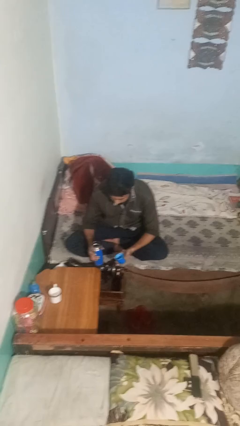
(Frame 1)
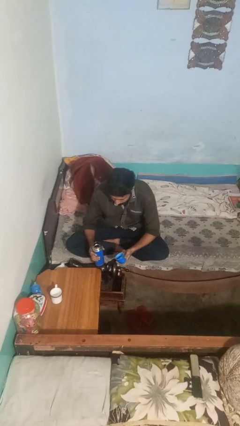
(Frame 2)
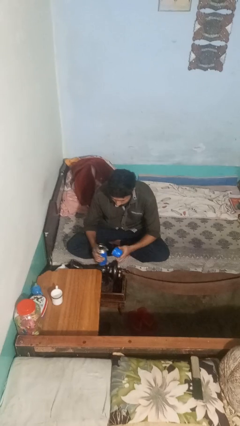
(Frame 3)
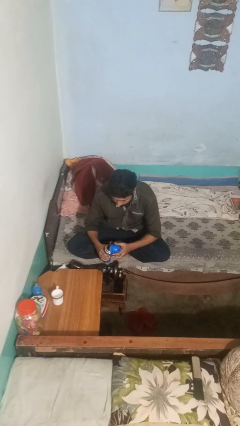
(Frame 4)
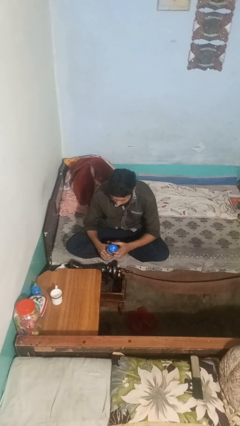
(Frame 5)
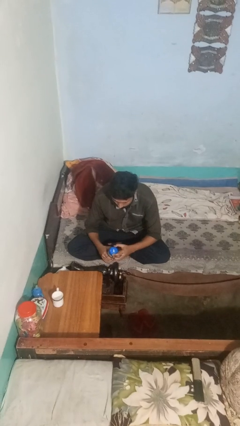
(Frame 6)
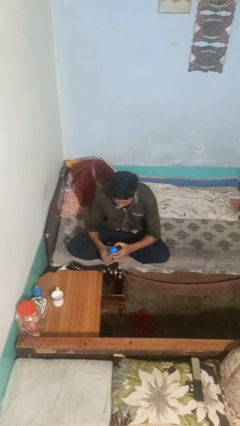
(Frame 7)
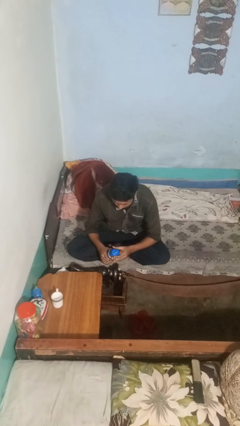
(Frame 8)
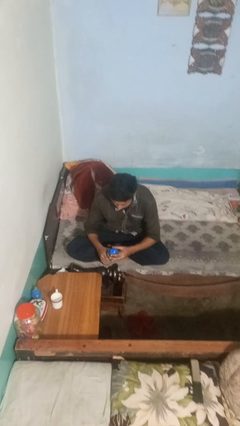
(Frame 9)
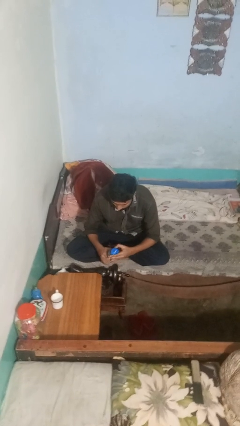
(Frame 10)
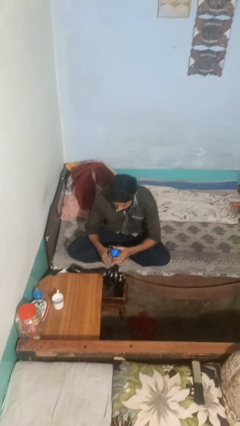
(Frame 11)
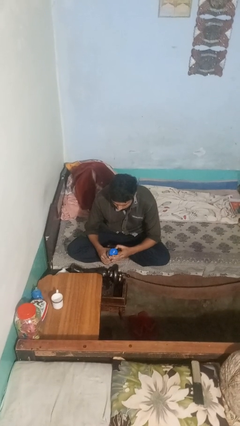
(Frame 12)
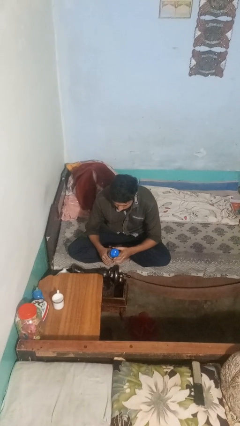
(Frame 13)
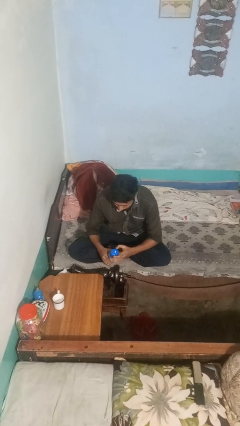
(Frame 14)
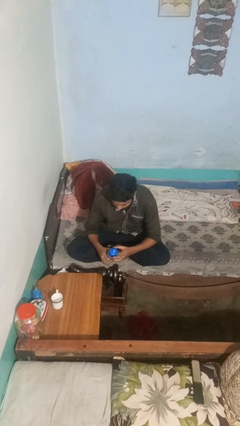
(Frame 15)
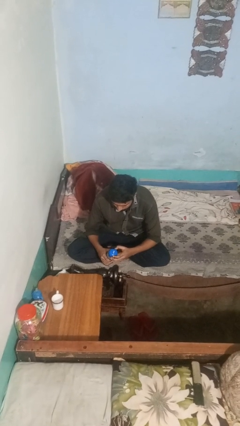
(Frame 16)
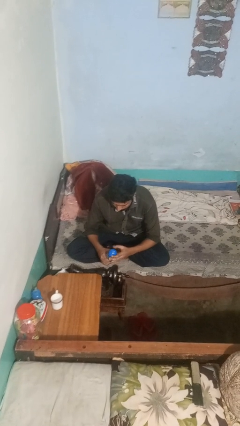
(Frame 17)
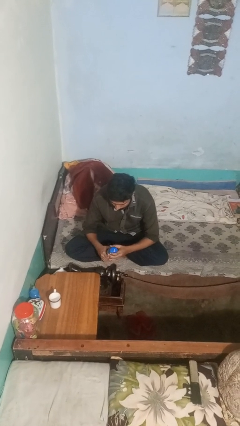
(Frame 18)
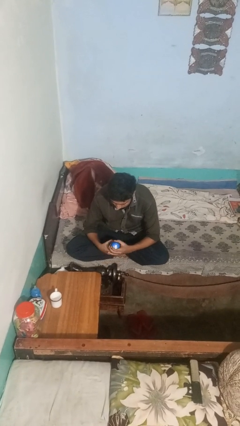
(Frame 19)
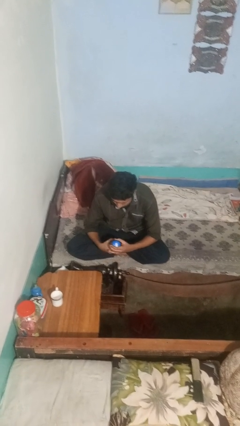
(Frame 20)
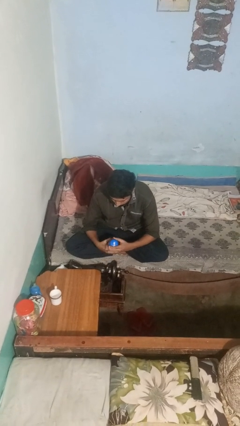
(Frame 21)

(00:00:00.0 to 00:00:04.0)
person screws lid to bottle

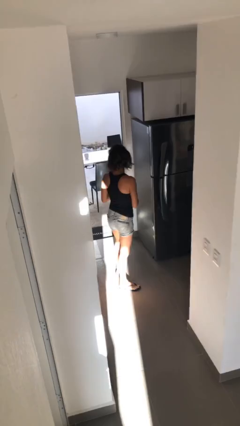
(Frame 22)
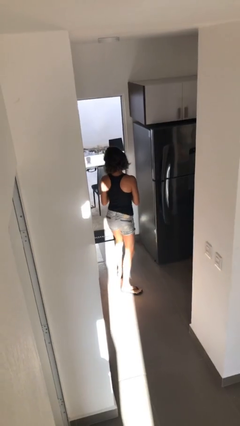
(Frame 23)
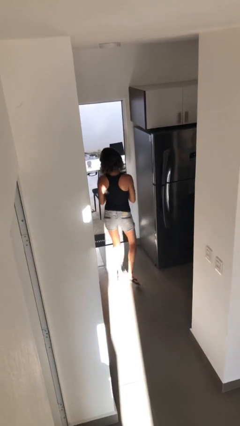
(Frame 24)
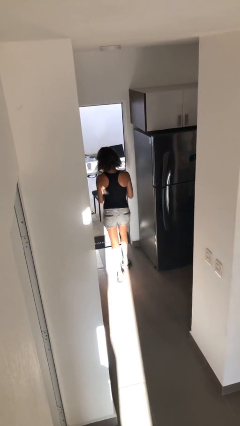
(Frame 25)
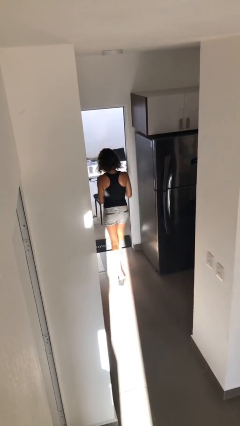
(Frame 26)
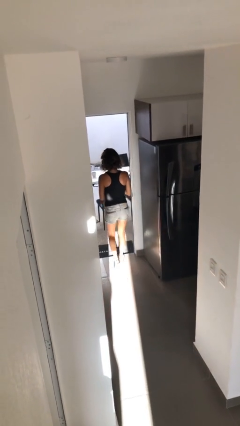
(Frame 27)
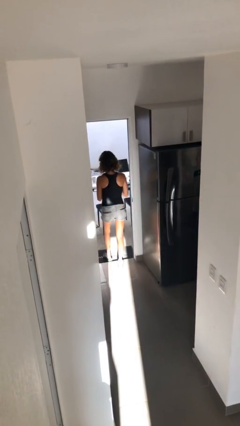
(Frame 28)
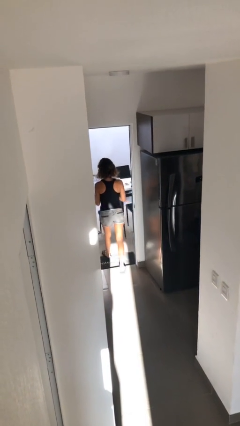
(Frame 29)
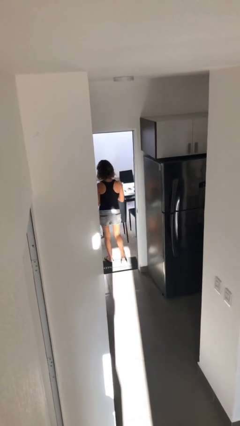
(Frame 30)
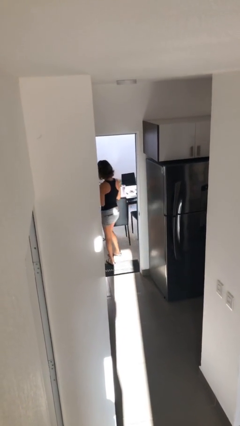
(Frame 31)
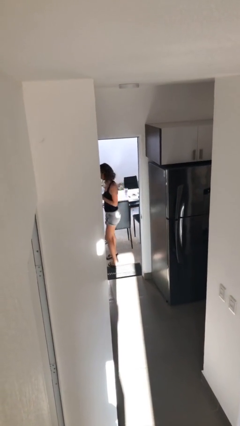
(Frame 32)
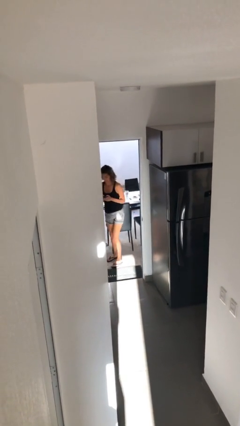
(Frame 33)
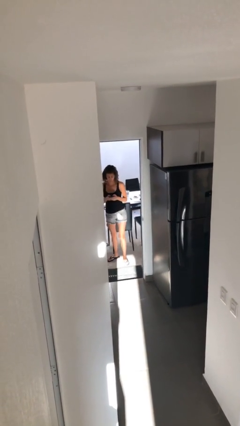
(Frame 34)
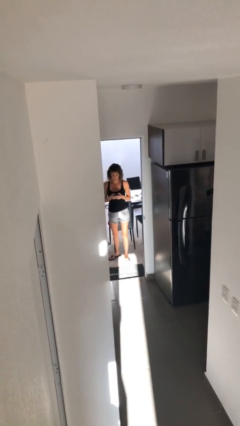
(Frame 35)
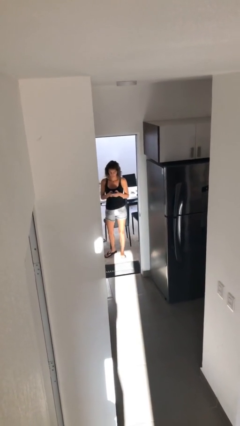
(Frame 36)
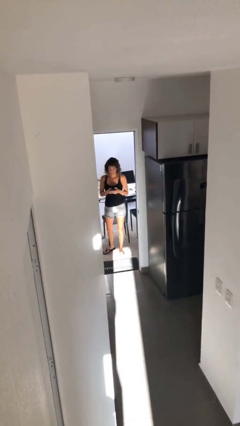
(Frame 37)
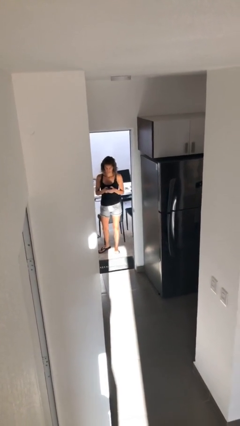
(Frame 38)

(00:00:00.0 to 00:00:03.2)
person exits scene through structure

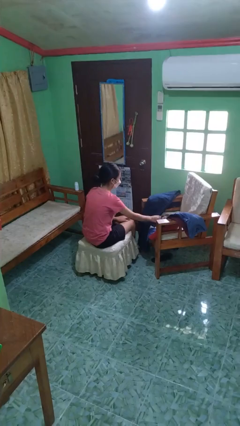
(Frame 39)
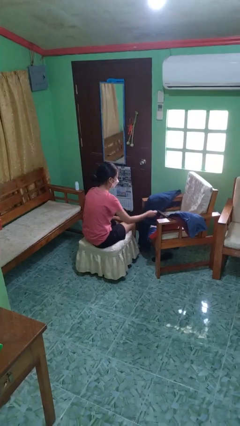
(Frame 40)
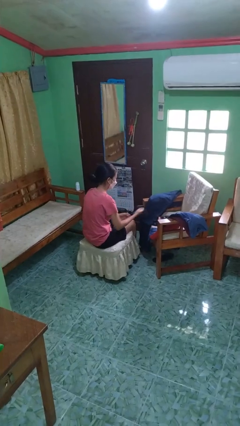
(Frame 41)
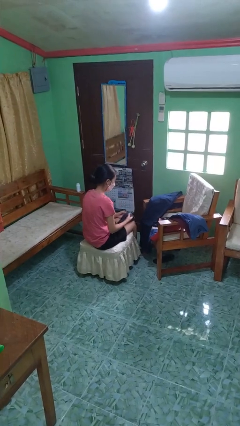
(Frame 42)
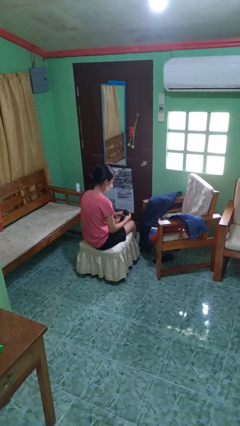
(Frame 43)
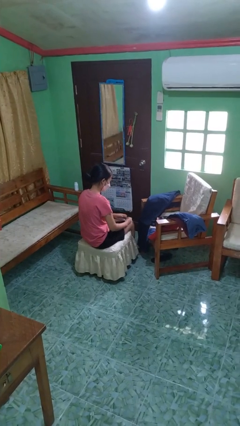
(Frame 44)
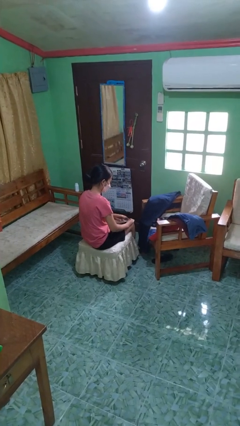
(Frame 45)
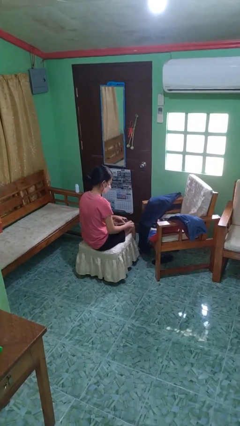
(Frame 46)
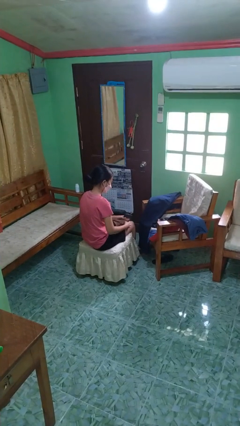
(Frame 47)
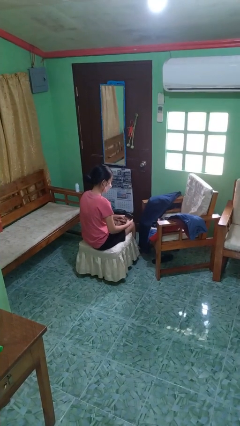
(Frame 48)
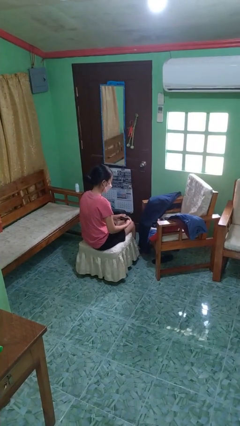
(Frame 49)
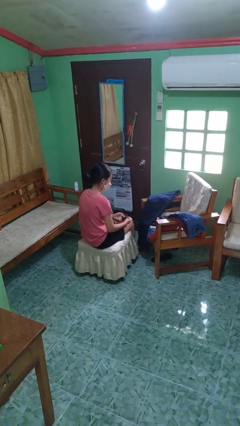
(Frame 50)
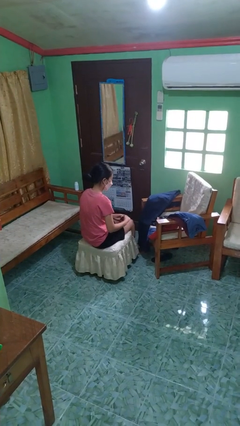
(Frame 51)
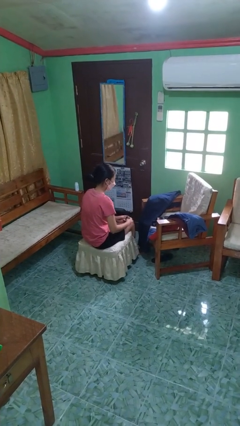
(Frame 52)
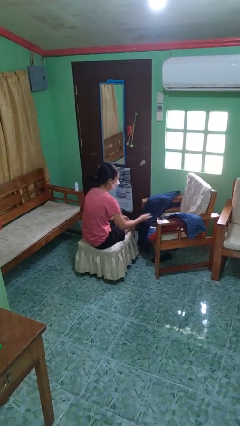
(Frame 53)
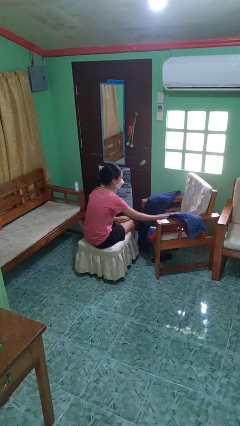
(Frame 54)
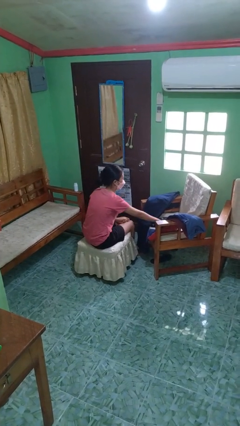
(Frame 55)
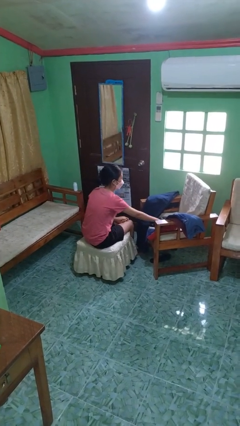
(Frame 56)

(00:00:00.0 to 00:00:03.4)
person folds socks

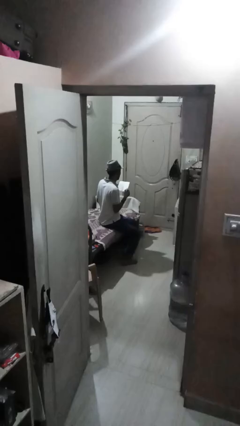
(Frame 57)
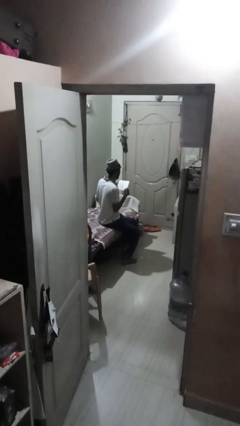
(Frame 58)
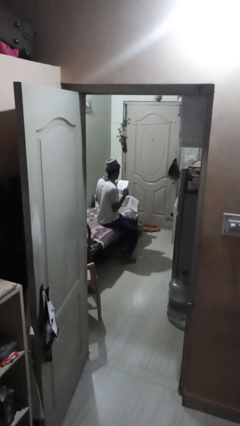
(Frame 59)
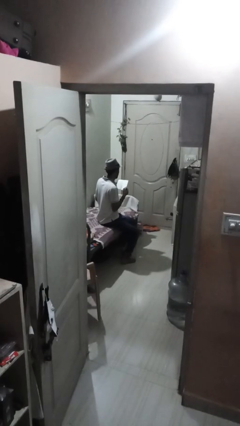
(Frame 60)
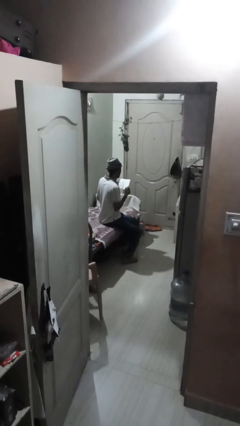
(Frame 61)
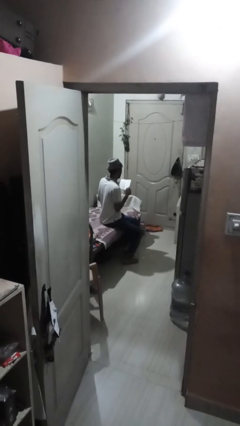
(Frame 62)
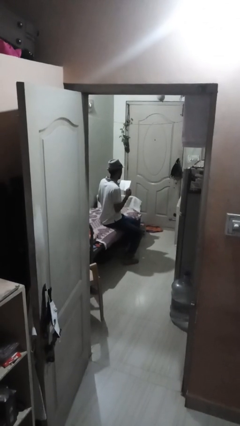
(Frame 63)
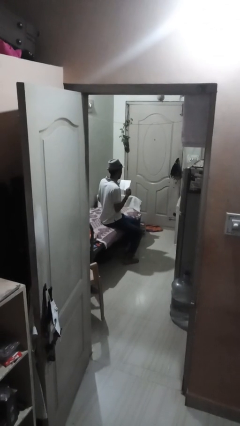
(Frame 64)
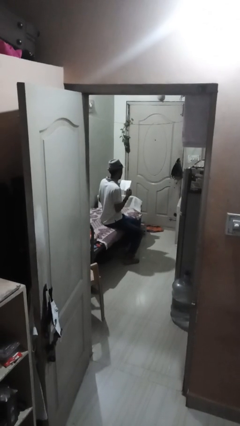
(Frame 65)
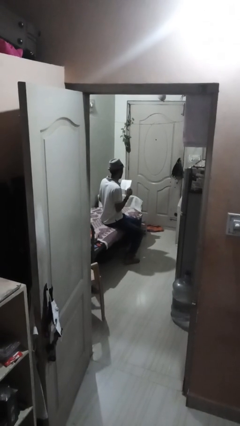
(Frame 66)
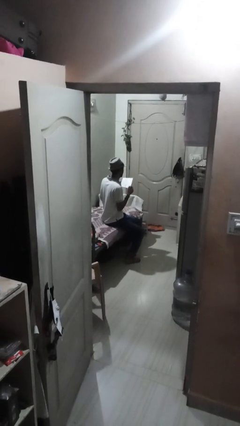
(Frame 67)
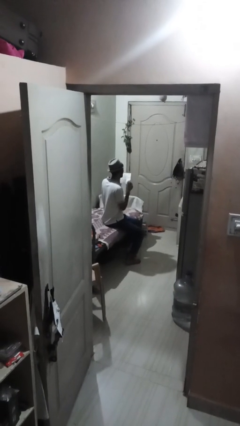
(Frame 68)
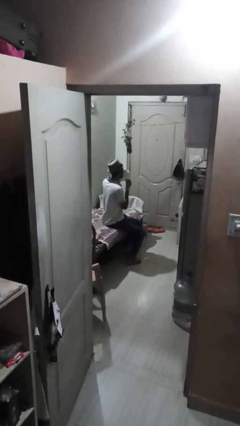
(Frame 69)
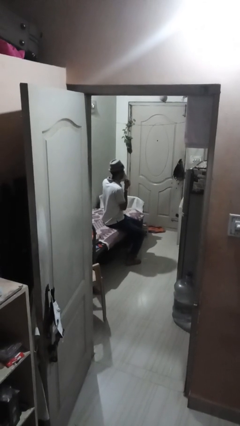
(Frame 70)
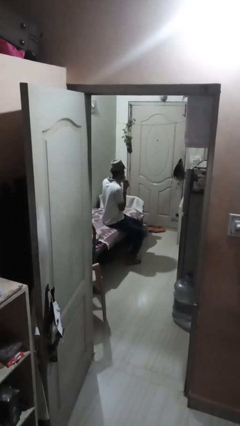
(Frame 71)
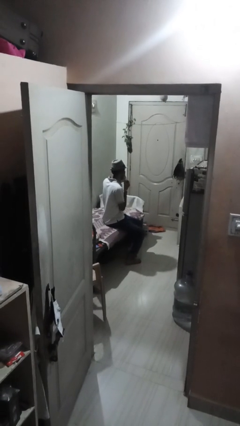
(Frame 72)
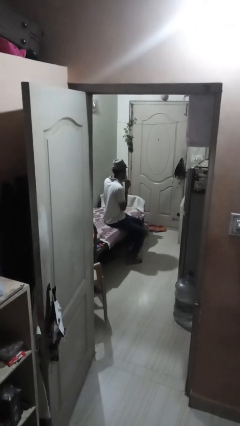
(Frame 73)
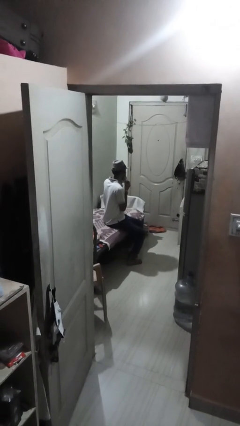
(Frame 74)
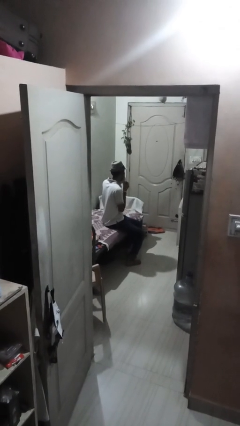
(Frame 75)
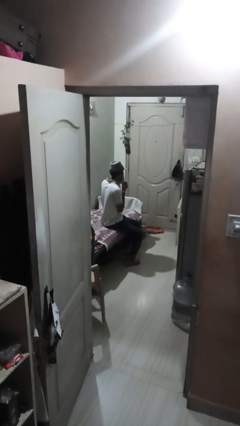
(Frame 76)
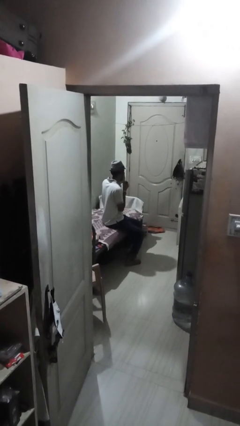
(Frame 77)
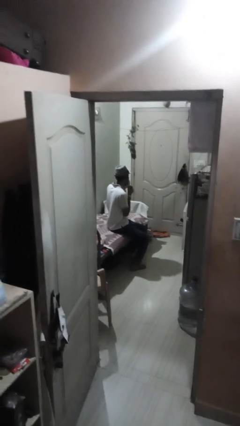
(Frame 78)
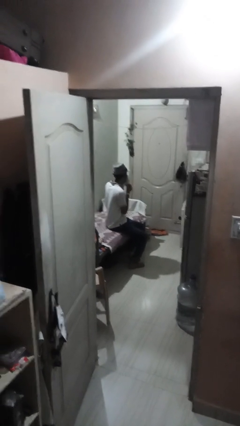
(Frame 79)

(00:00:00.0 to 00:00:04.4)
person blows nose

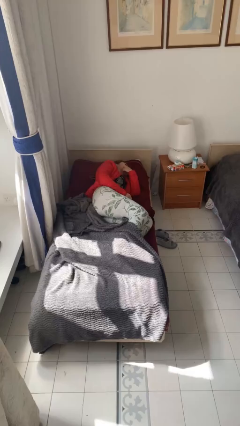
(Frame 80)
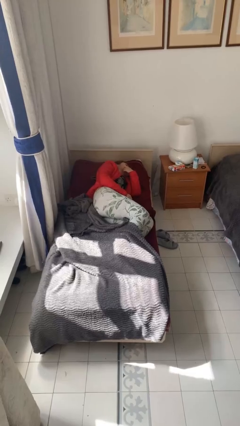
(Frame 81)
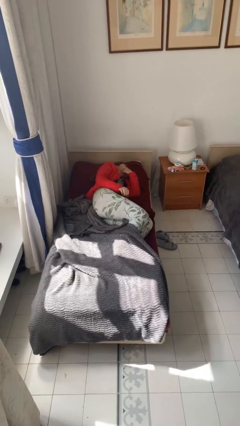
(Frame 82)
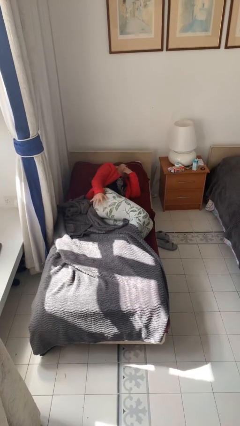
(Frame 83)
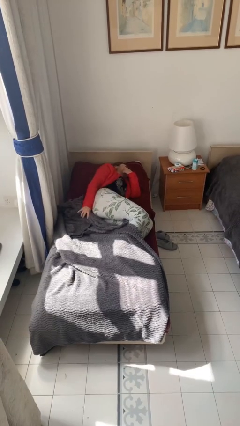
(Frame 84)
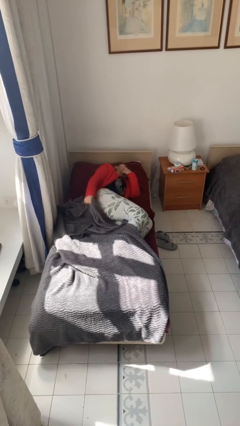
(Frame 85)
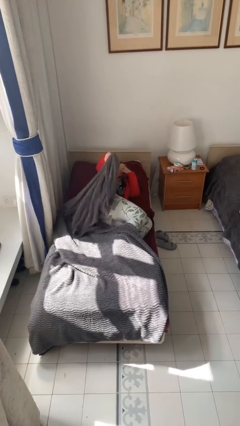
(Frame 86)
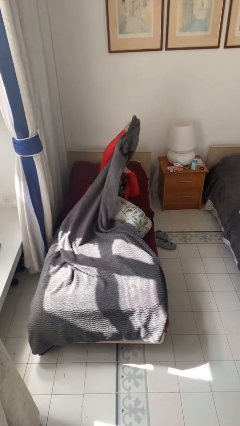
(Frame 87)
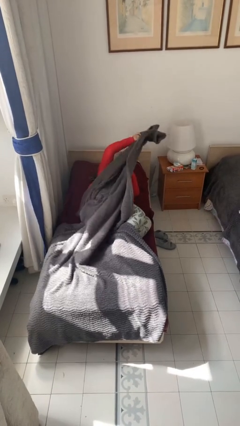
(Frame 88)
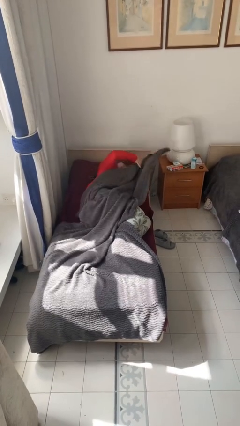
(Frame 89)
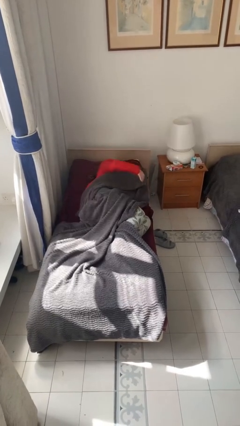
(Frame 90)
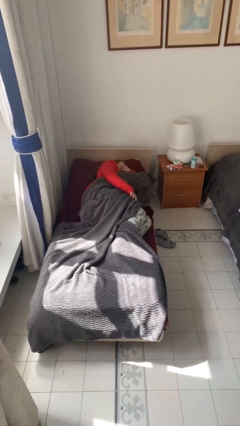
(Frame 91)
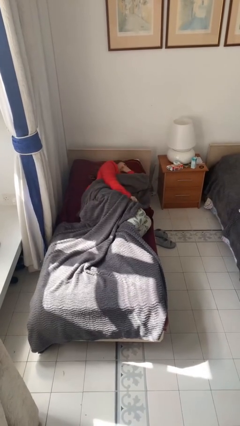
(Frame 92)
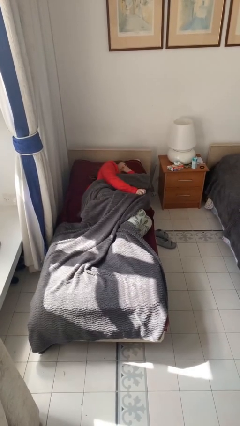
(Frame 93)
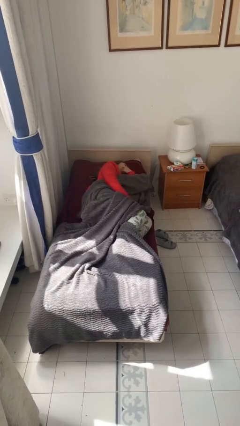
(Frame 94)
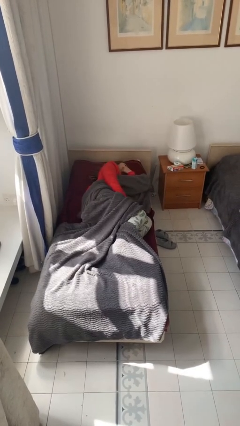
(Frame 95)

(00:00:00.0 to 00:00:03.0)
person covers with bedsheets
